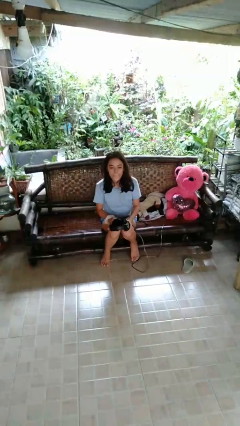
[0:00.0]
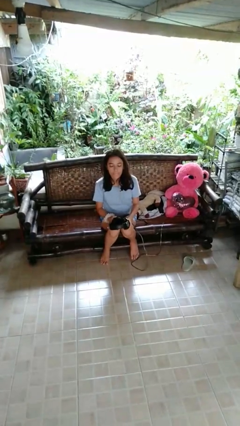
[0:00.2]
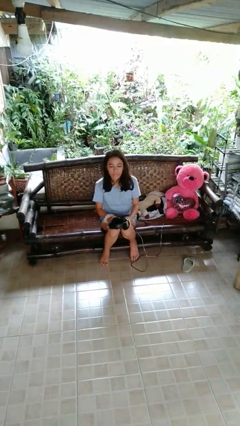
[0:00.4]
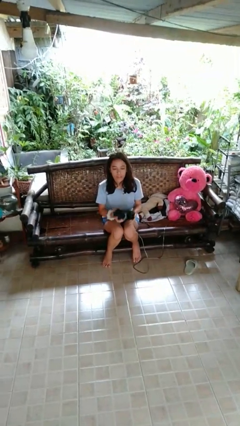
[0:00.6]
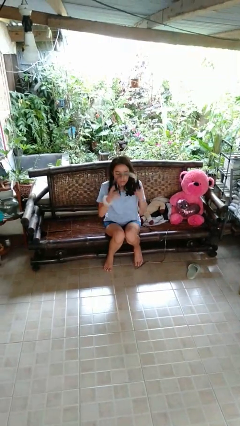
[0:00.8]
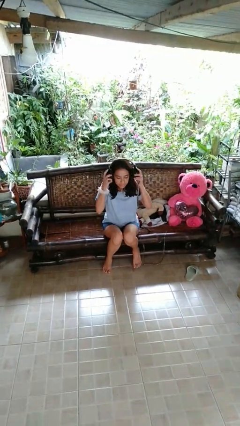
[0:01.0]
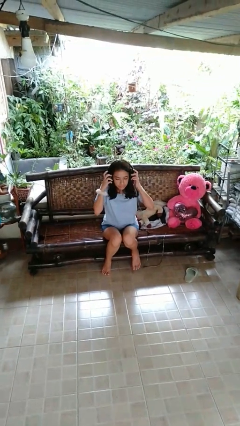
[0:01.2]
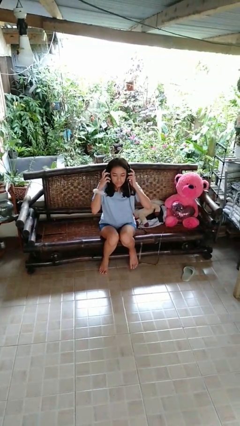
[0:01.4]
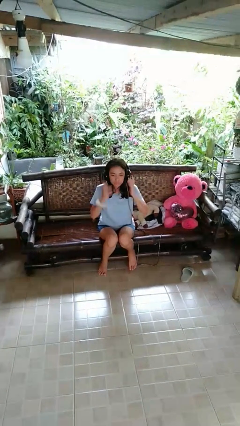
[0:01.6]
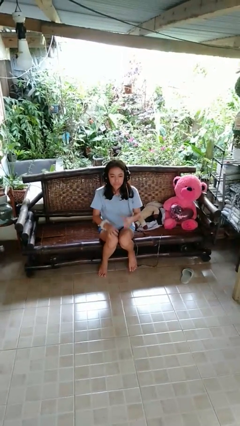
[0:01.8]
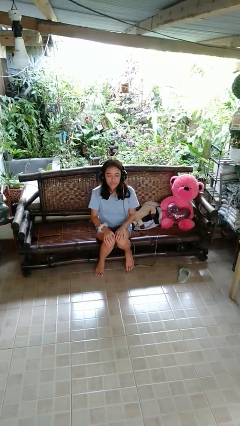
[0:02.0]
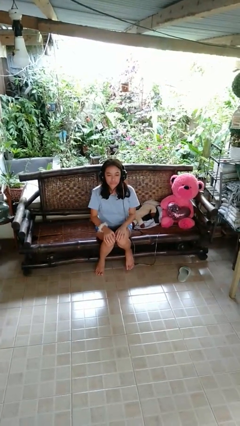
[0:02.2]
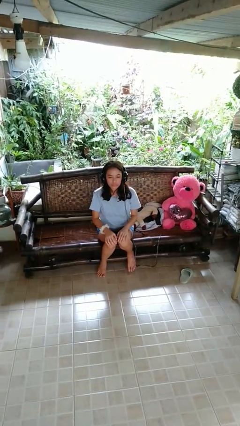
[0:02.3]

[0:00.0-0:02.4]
person puts on headphones

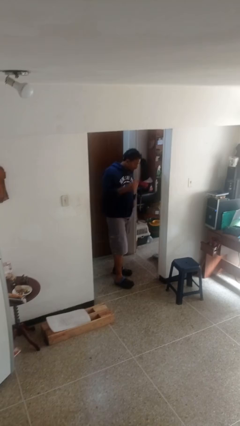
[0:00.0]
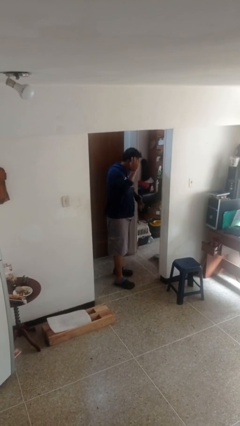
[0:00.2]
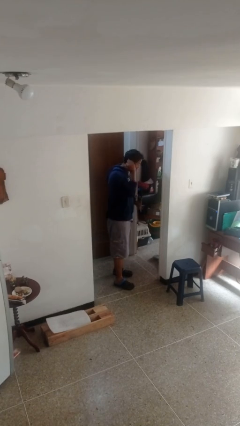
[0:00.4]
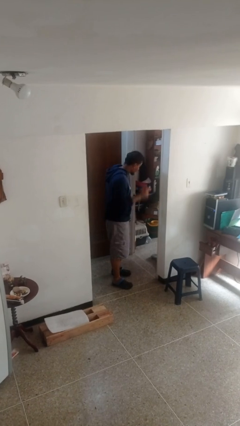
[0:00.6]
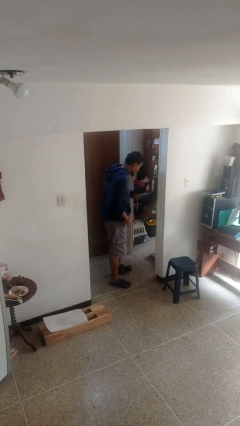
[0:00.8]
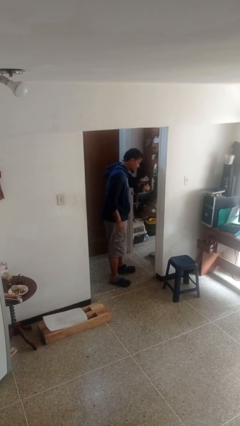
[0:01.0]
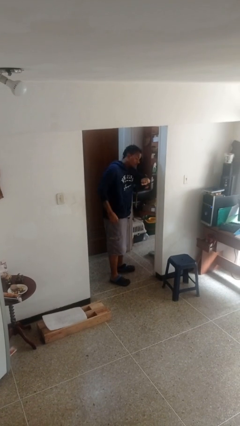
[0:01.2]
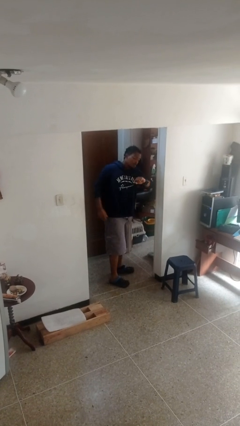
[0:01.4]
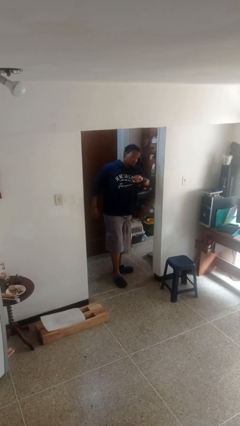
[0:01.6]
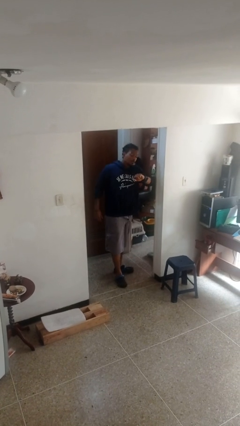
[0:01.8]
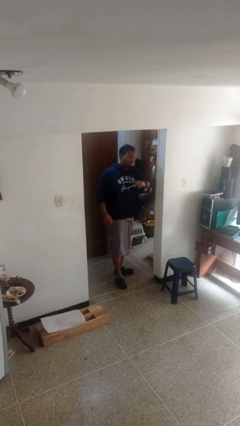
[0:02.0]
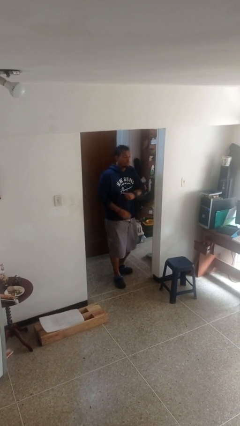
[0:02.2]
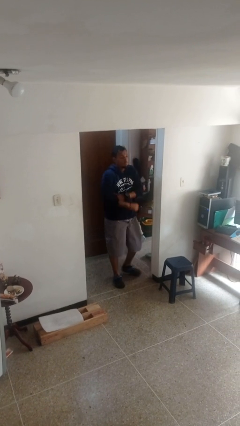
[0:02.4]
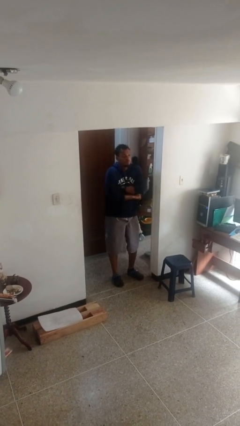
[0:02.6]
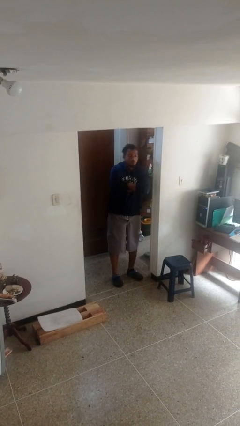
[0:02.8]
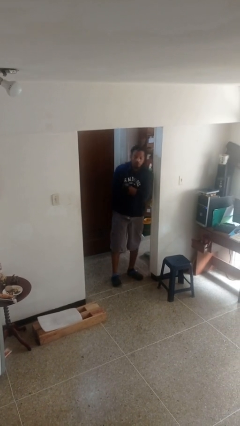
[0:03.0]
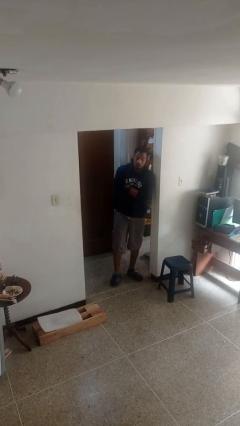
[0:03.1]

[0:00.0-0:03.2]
person looks at wristwatch

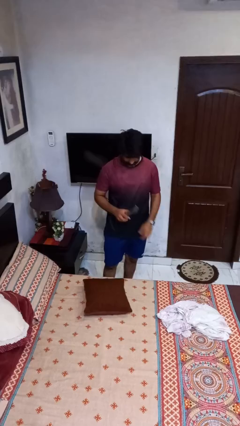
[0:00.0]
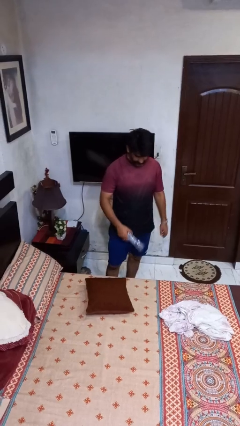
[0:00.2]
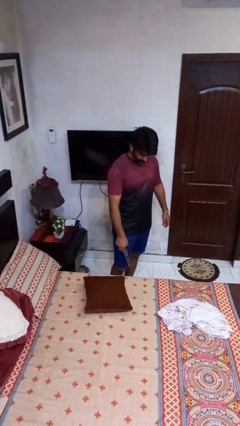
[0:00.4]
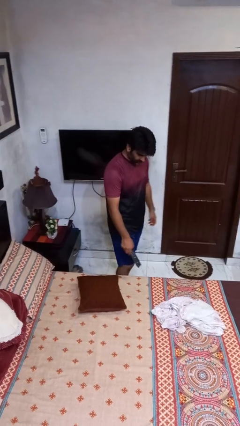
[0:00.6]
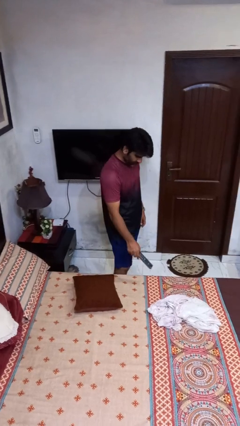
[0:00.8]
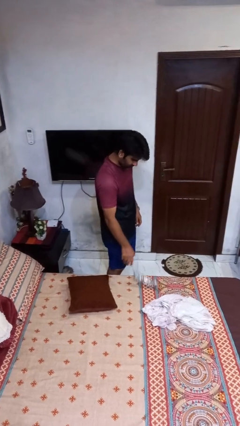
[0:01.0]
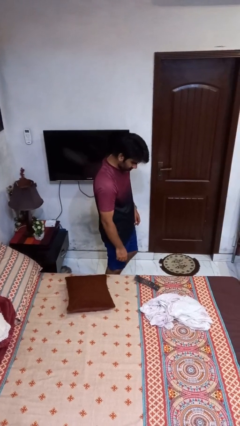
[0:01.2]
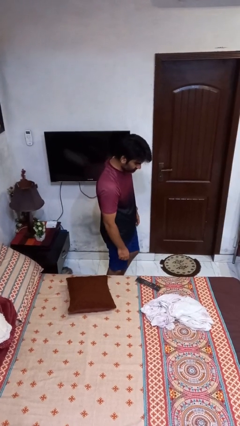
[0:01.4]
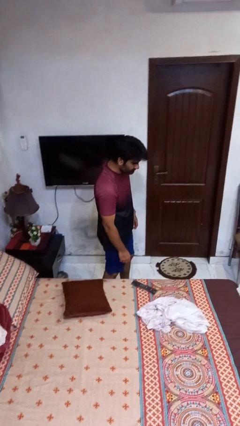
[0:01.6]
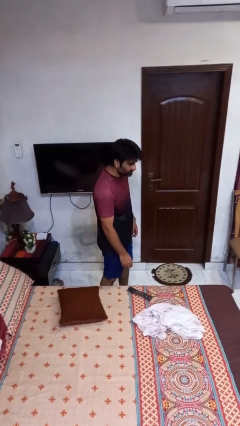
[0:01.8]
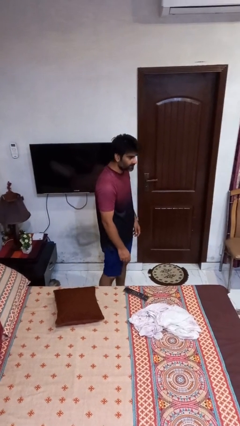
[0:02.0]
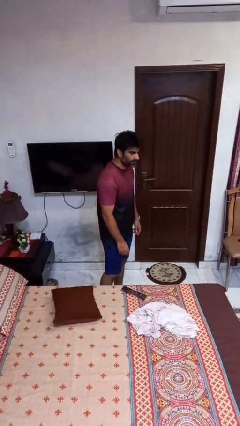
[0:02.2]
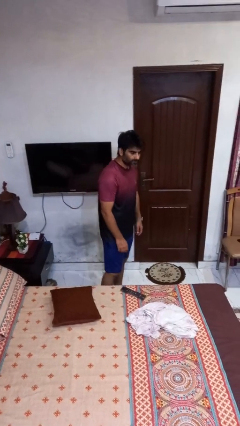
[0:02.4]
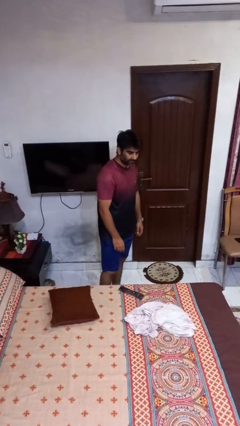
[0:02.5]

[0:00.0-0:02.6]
person puts down object on bed

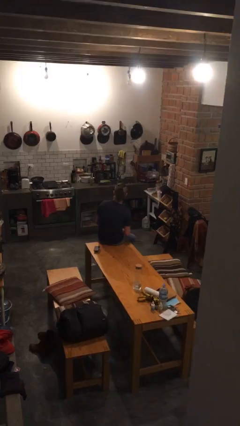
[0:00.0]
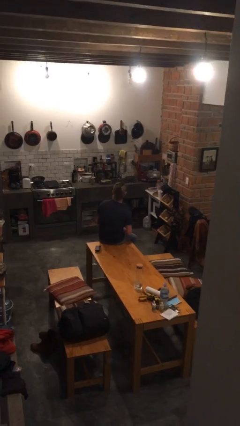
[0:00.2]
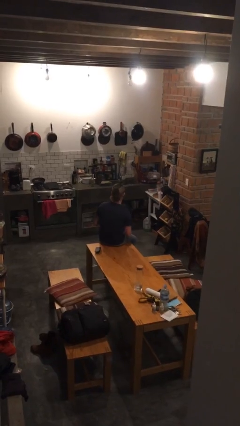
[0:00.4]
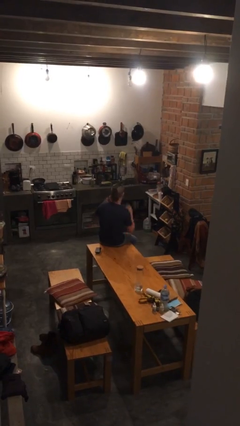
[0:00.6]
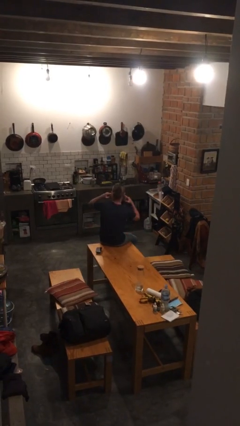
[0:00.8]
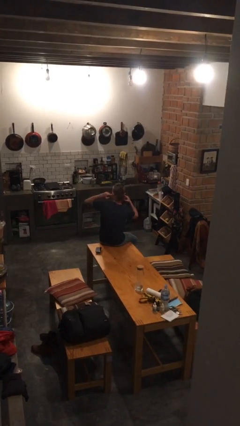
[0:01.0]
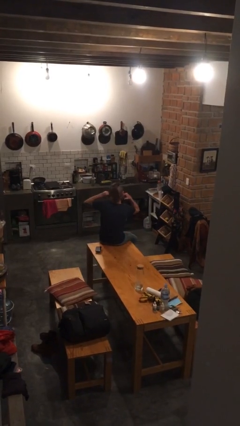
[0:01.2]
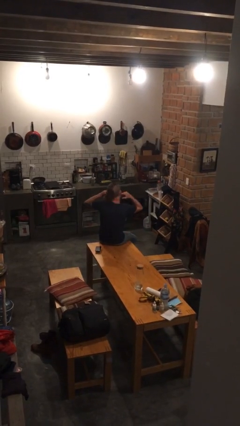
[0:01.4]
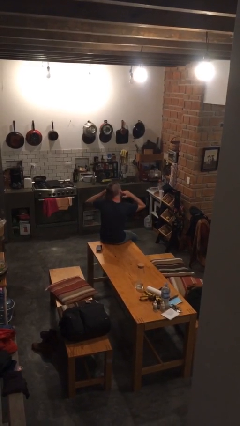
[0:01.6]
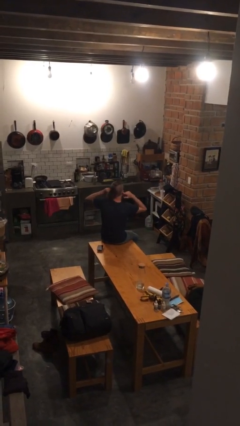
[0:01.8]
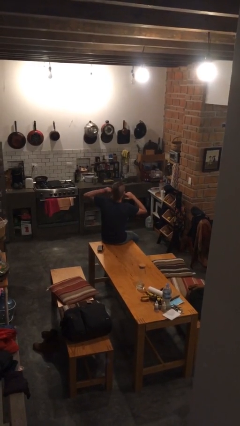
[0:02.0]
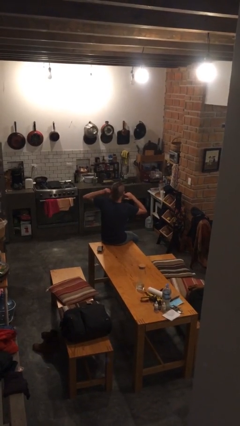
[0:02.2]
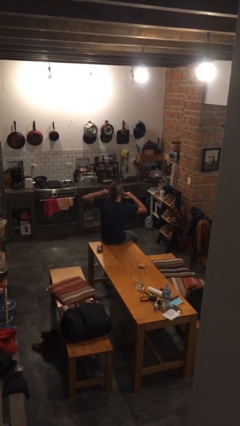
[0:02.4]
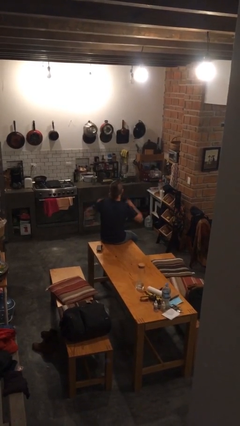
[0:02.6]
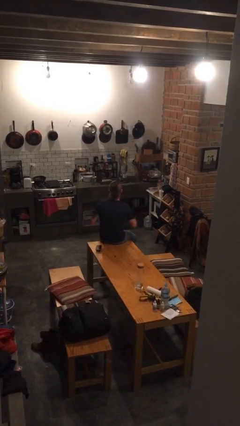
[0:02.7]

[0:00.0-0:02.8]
person puts fingers in ear

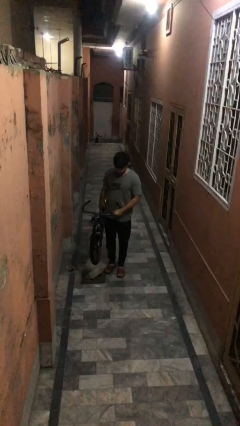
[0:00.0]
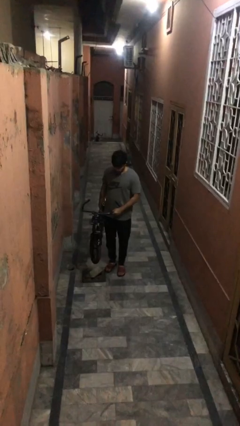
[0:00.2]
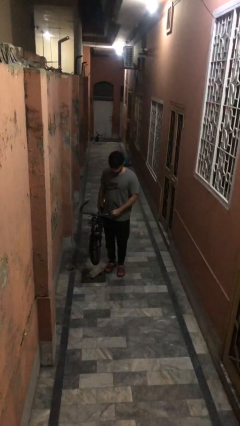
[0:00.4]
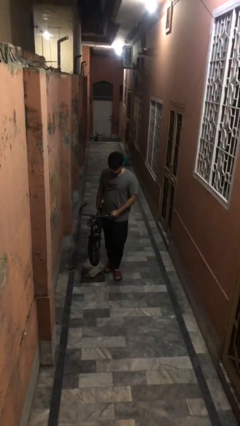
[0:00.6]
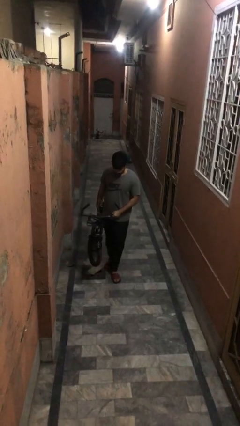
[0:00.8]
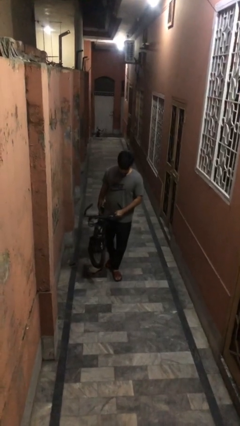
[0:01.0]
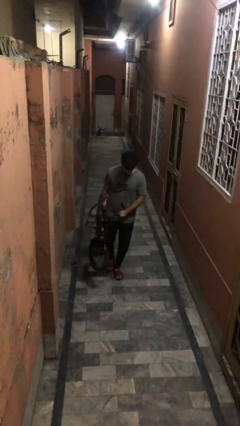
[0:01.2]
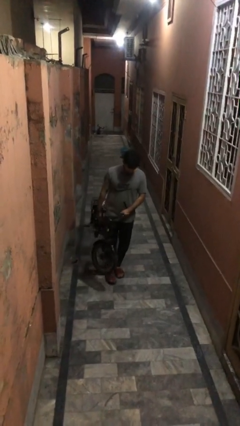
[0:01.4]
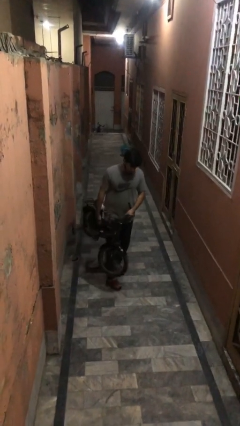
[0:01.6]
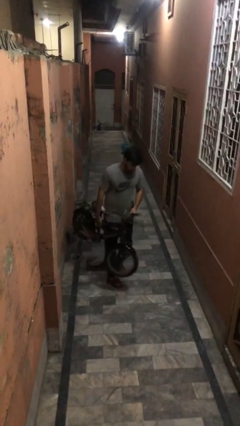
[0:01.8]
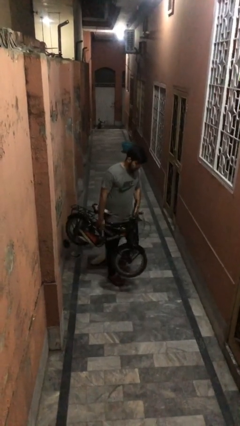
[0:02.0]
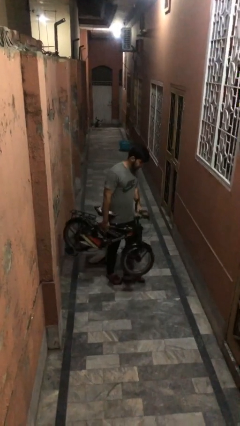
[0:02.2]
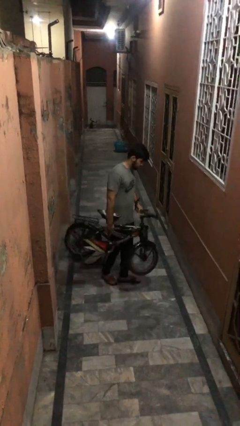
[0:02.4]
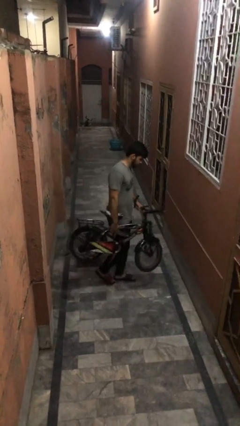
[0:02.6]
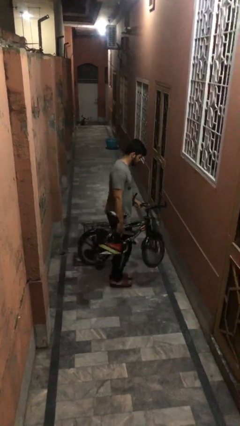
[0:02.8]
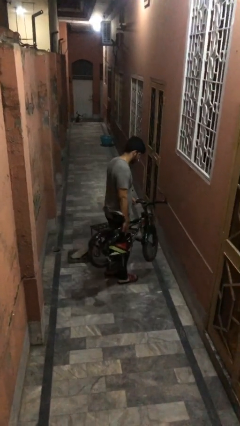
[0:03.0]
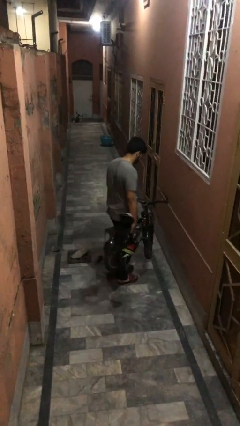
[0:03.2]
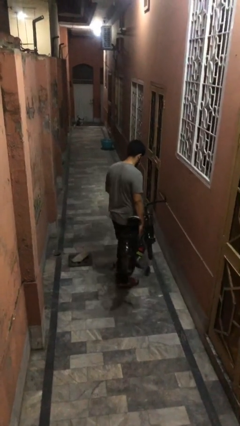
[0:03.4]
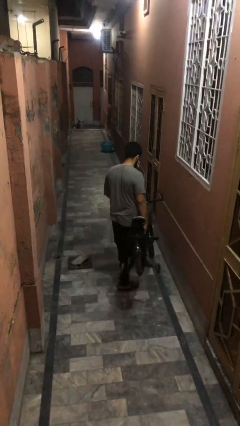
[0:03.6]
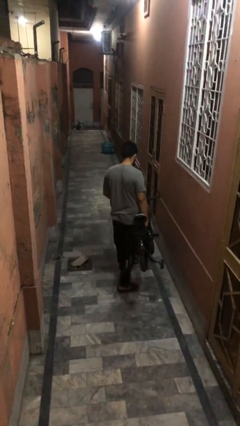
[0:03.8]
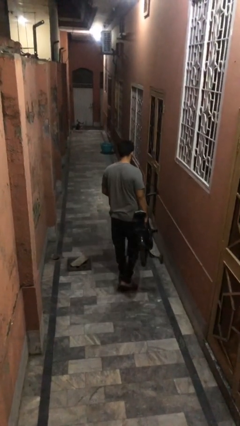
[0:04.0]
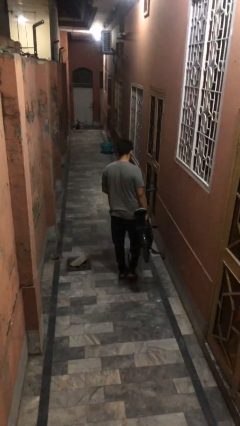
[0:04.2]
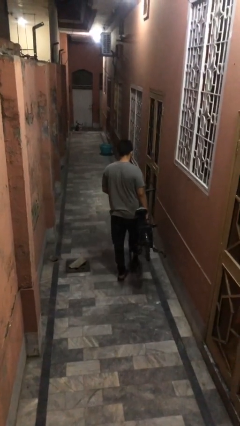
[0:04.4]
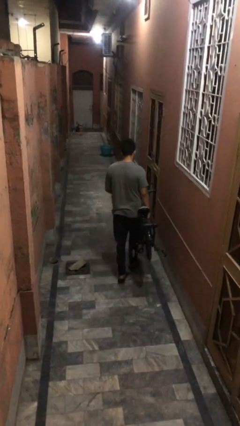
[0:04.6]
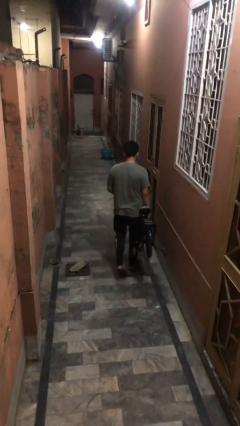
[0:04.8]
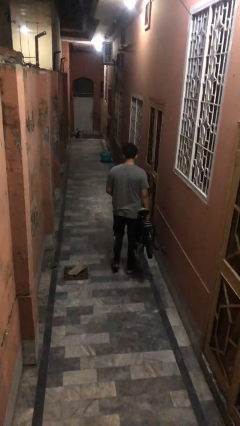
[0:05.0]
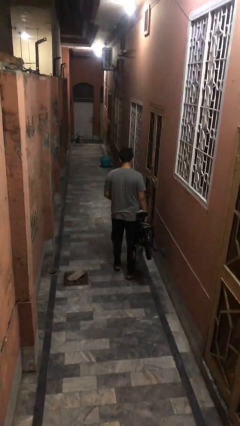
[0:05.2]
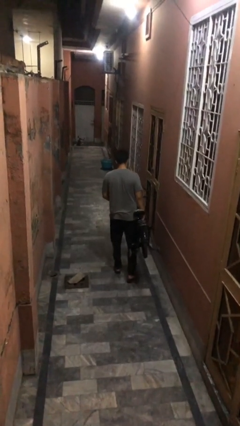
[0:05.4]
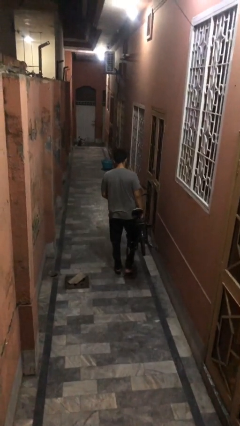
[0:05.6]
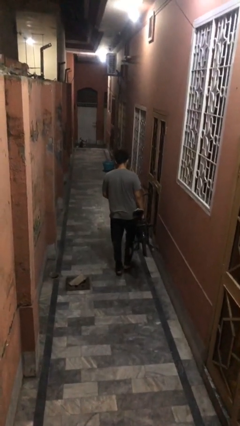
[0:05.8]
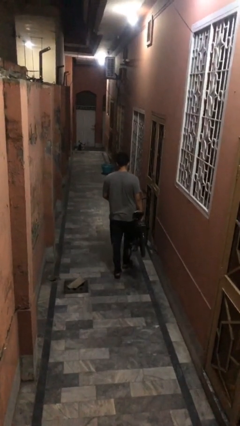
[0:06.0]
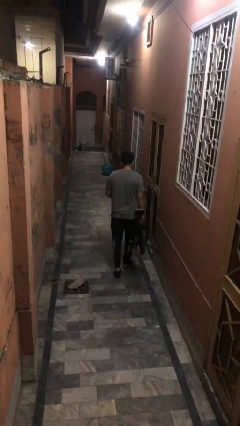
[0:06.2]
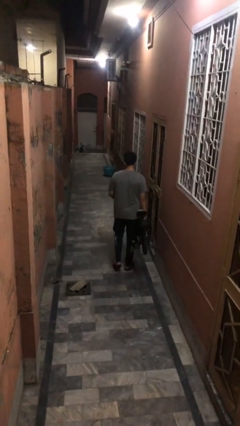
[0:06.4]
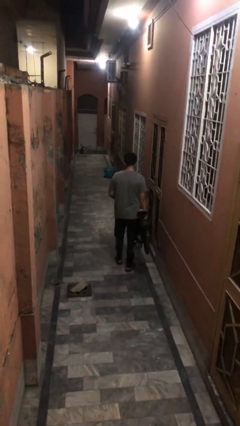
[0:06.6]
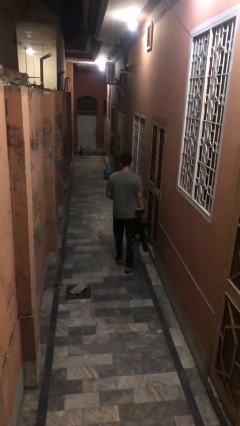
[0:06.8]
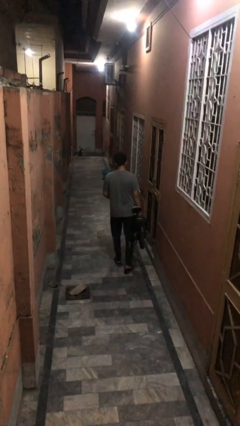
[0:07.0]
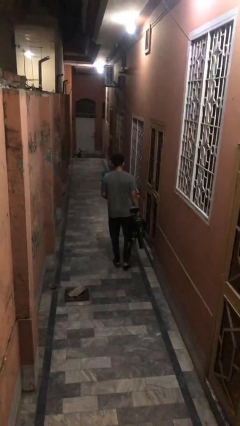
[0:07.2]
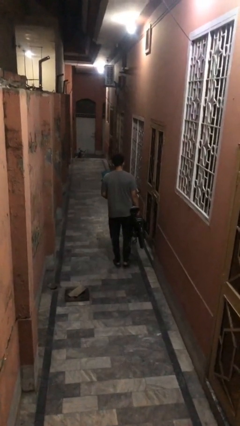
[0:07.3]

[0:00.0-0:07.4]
person carries bicycle
